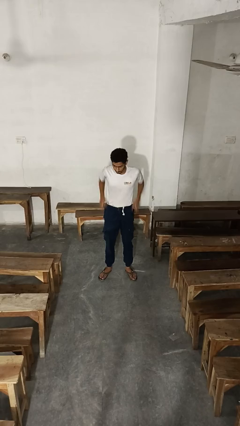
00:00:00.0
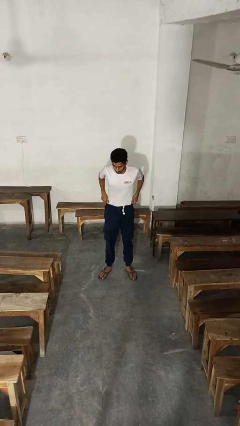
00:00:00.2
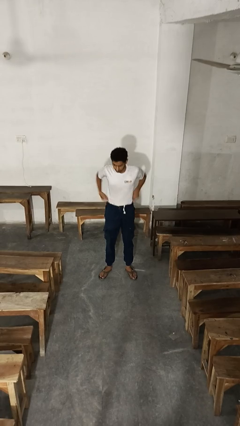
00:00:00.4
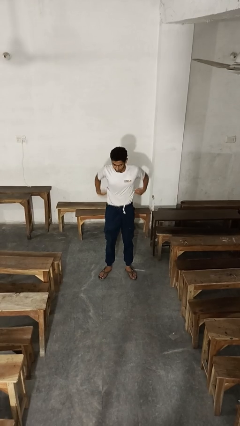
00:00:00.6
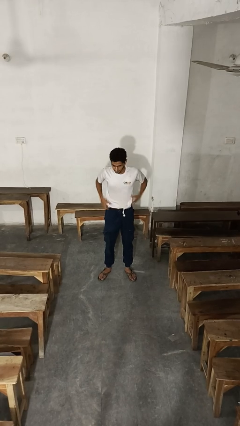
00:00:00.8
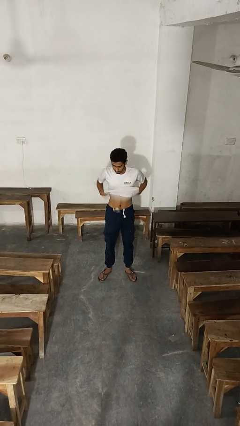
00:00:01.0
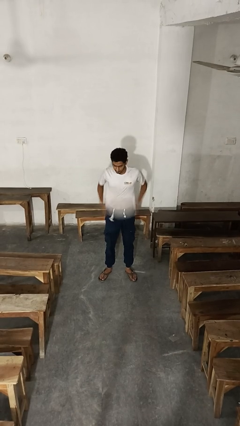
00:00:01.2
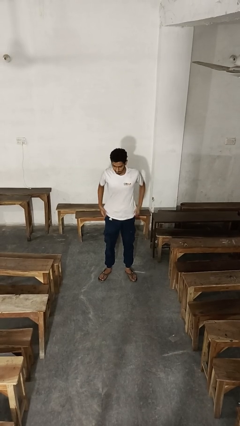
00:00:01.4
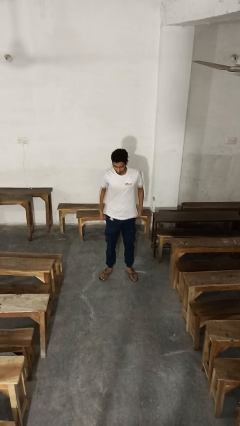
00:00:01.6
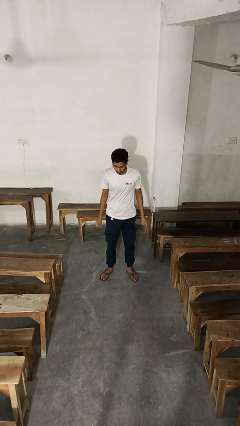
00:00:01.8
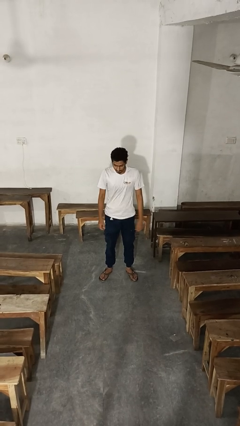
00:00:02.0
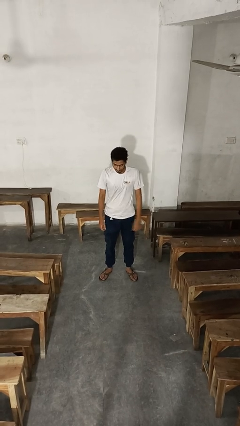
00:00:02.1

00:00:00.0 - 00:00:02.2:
person untucks shirt

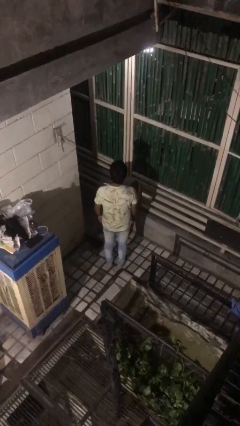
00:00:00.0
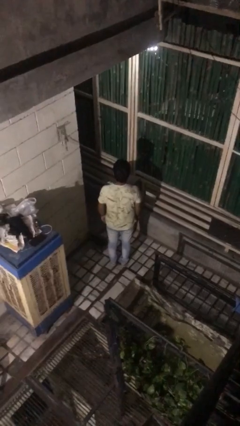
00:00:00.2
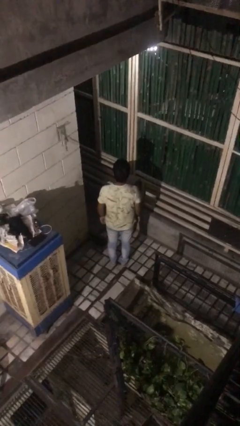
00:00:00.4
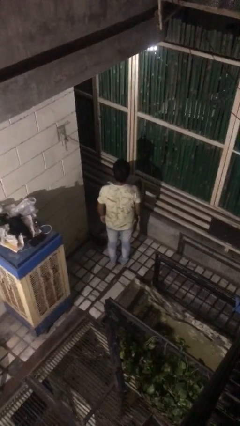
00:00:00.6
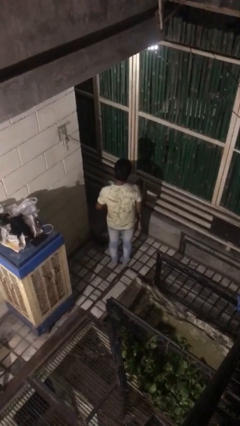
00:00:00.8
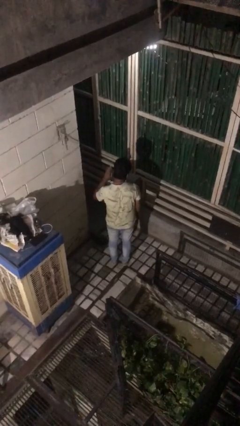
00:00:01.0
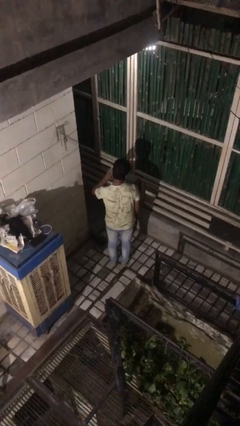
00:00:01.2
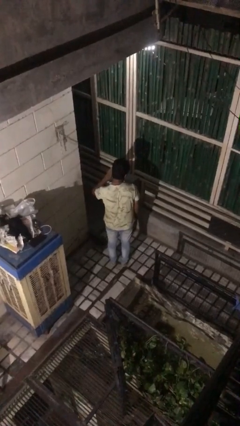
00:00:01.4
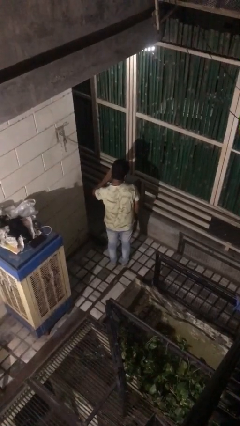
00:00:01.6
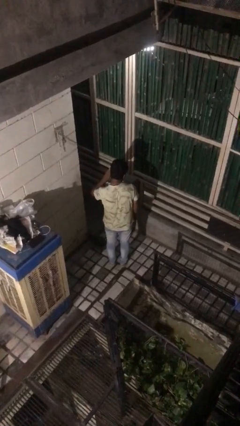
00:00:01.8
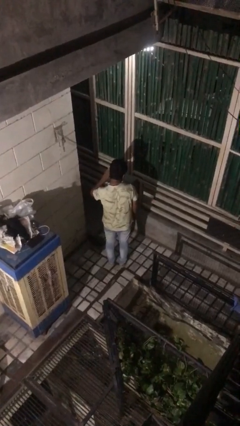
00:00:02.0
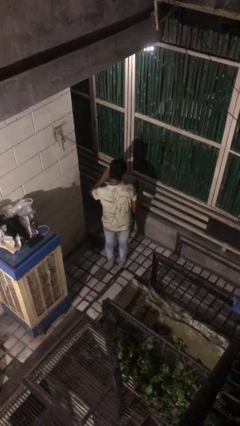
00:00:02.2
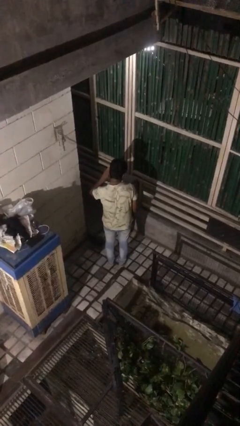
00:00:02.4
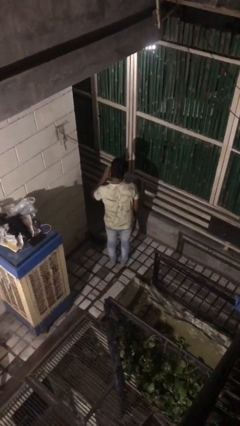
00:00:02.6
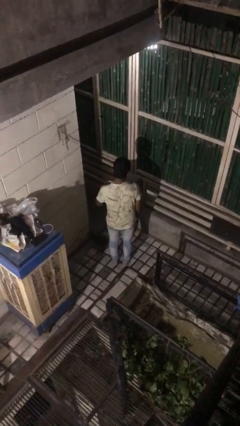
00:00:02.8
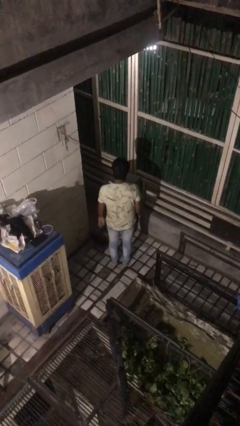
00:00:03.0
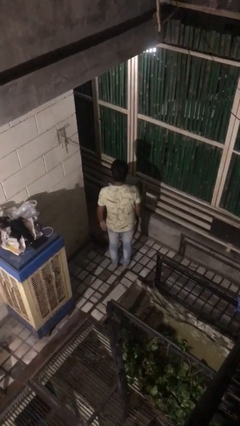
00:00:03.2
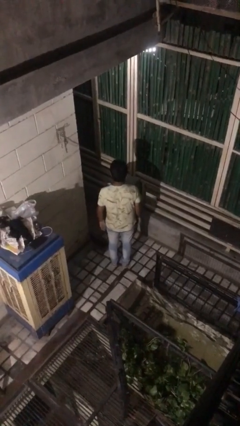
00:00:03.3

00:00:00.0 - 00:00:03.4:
person gestures listen closely

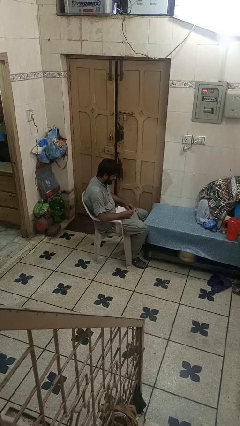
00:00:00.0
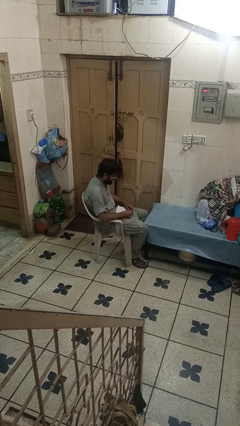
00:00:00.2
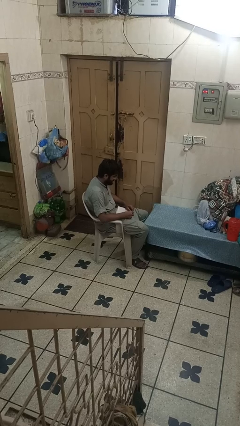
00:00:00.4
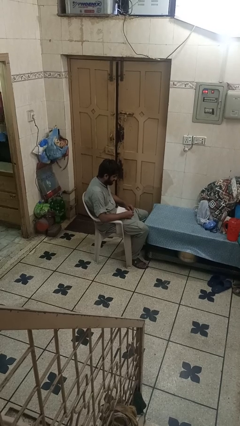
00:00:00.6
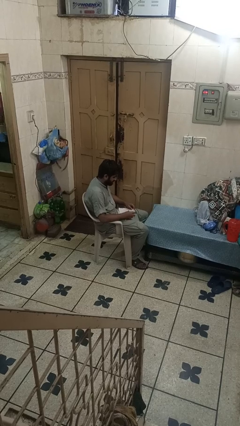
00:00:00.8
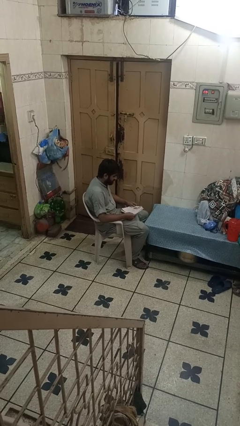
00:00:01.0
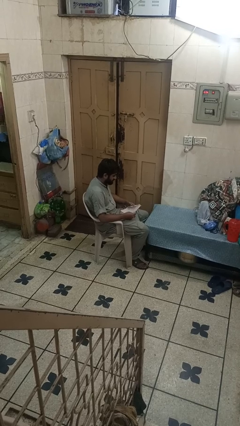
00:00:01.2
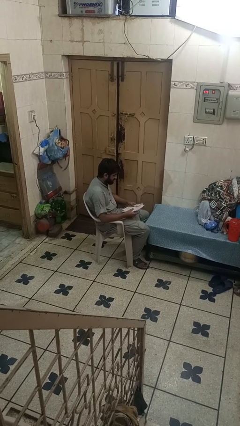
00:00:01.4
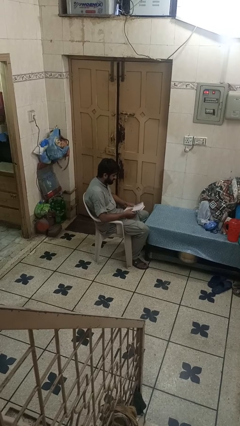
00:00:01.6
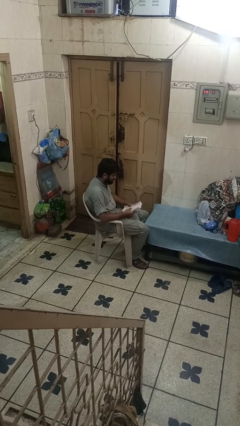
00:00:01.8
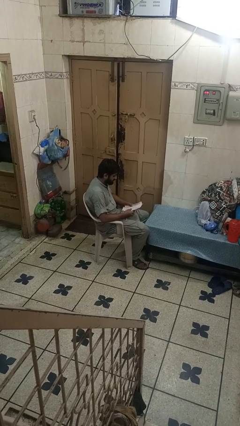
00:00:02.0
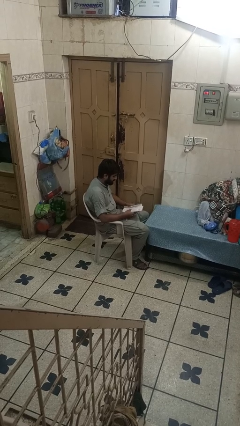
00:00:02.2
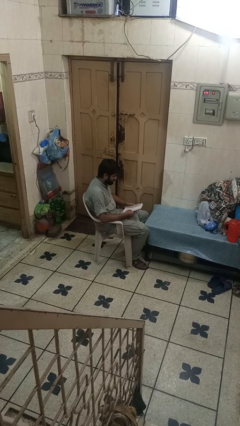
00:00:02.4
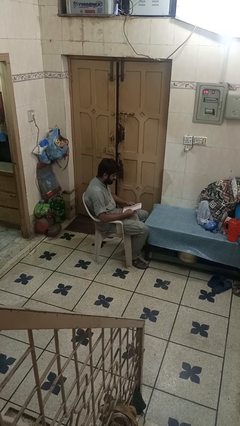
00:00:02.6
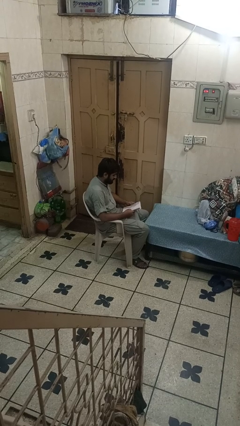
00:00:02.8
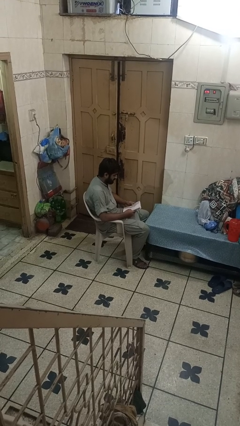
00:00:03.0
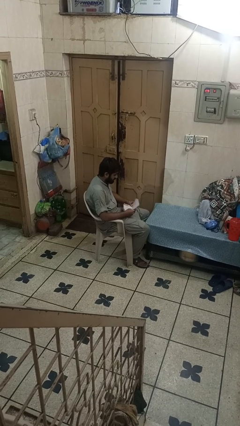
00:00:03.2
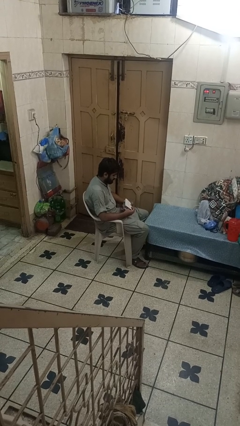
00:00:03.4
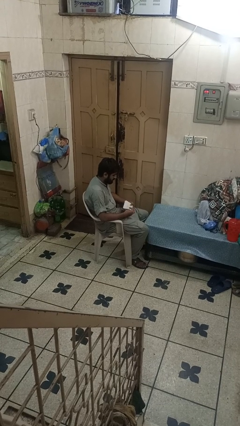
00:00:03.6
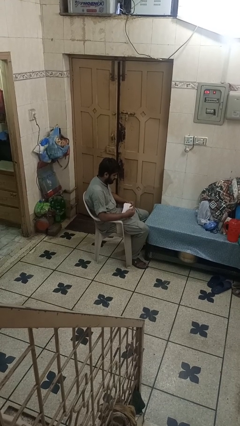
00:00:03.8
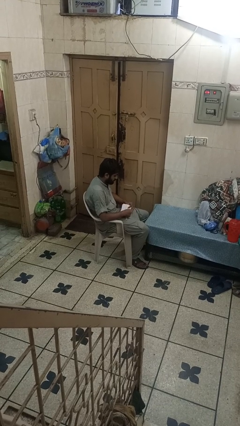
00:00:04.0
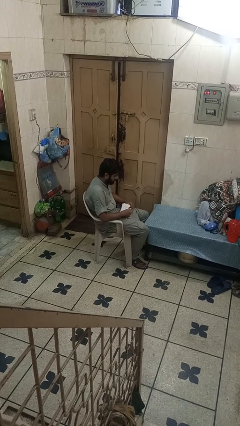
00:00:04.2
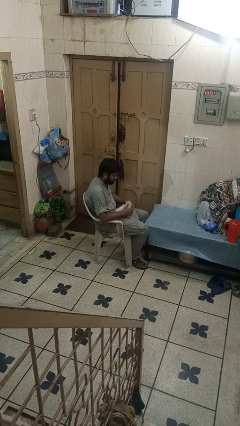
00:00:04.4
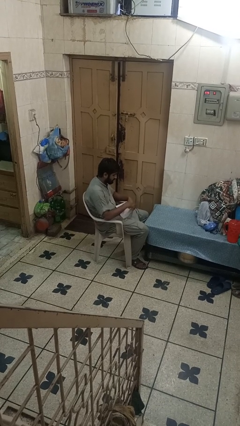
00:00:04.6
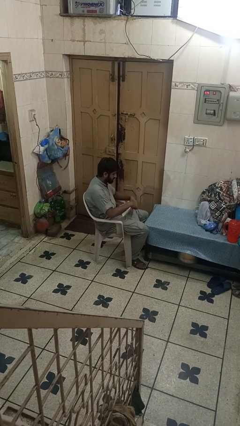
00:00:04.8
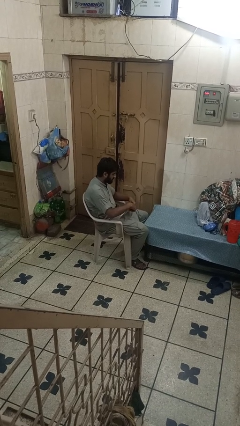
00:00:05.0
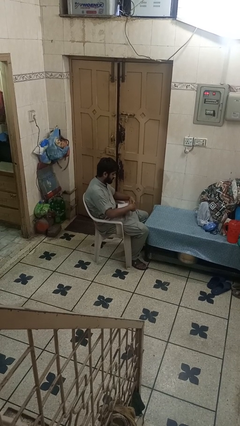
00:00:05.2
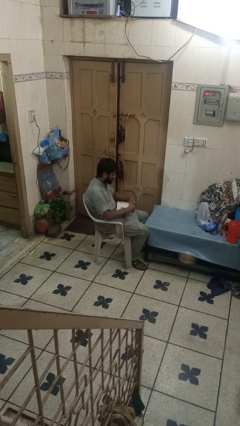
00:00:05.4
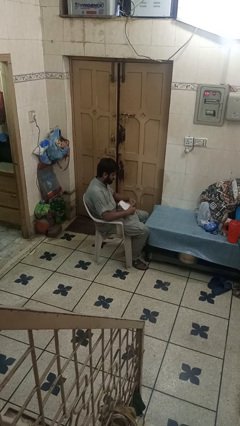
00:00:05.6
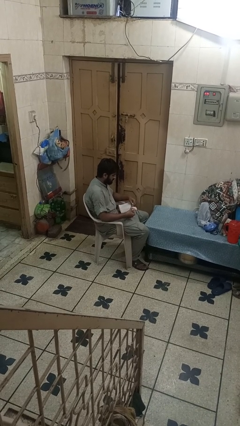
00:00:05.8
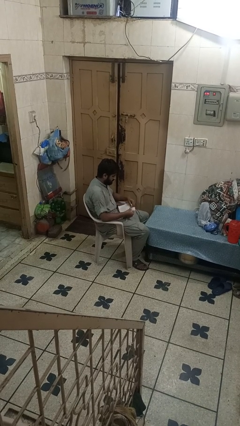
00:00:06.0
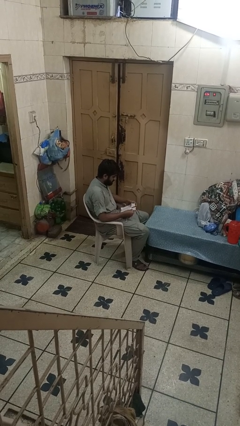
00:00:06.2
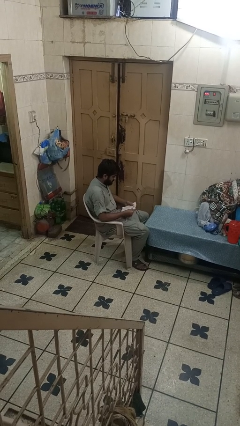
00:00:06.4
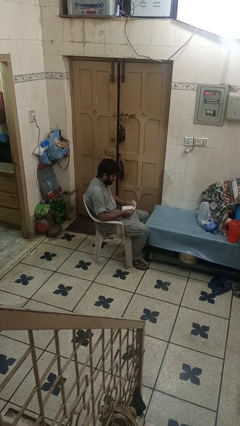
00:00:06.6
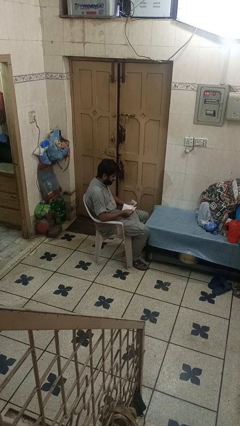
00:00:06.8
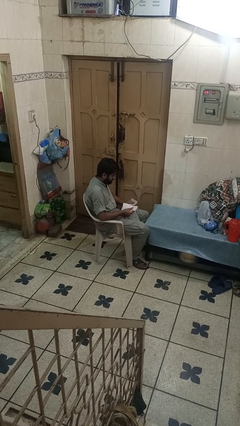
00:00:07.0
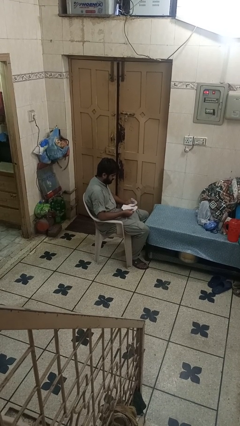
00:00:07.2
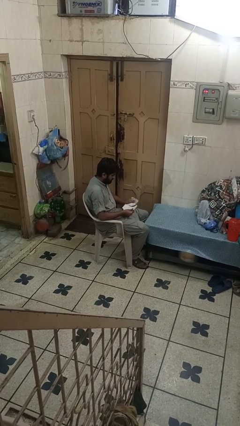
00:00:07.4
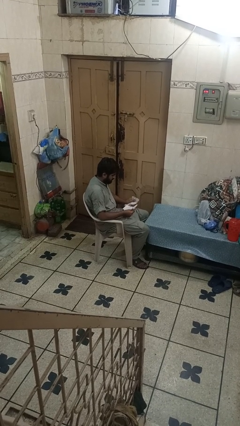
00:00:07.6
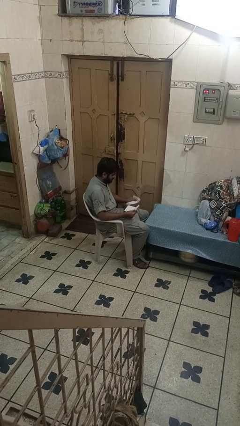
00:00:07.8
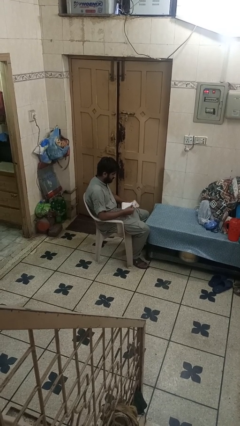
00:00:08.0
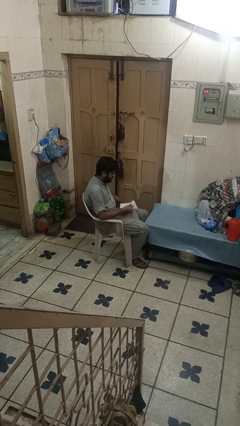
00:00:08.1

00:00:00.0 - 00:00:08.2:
person tears paper

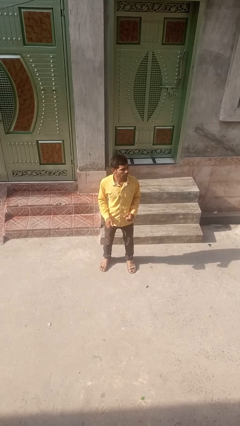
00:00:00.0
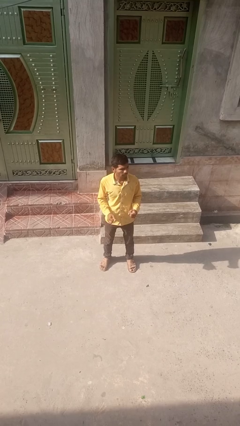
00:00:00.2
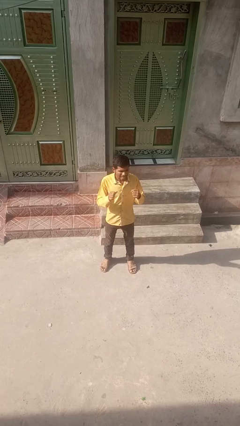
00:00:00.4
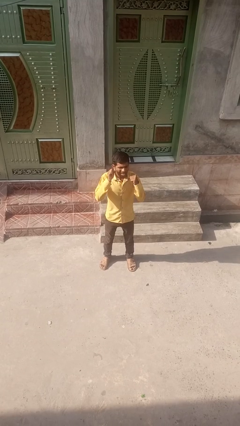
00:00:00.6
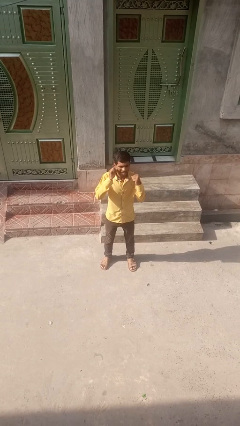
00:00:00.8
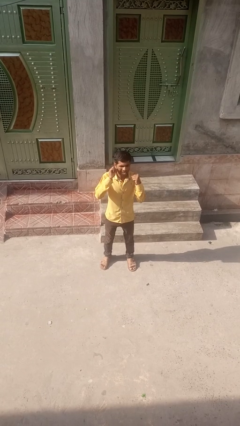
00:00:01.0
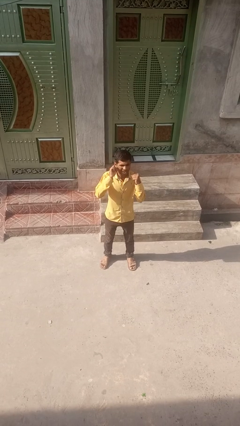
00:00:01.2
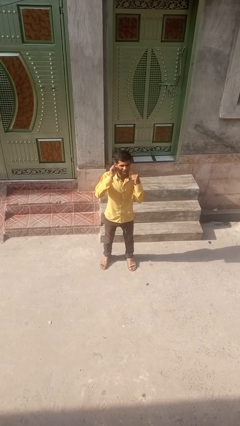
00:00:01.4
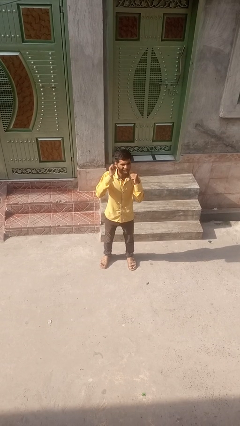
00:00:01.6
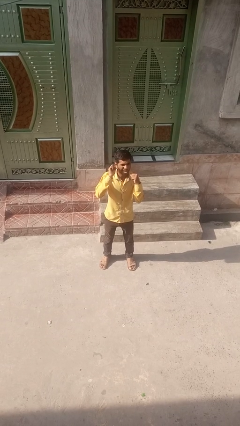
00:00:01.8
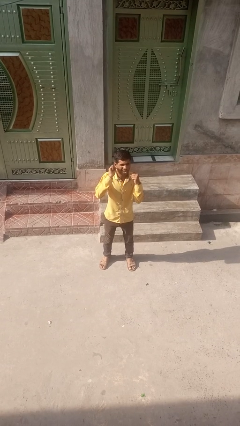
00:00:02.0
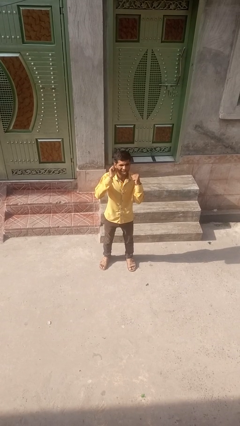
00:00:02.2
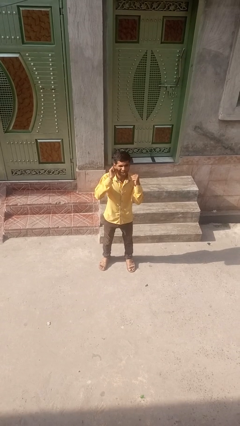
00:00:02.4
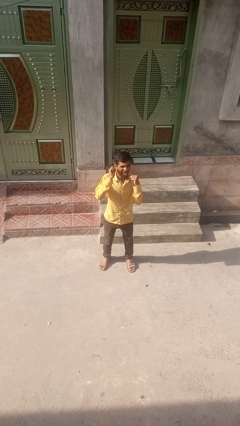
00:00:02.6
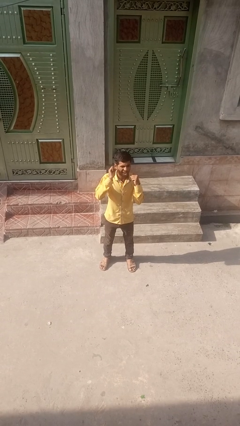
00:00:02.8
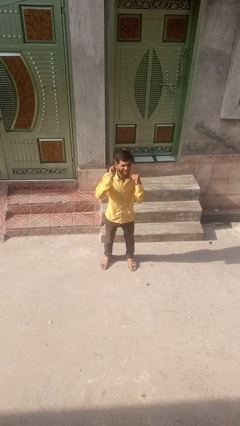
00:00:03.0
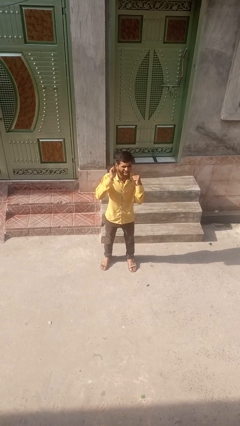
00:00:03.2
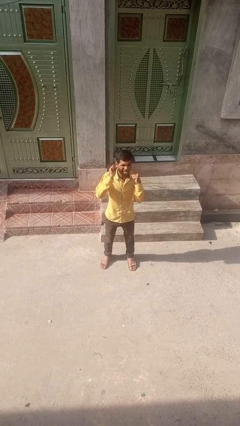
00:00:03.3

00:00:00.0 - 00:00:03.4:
person flosses

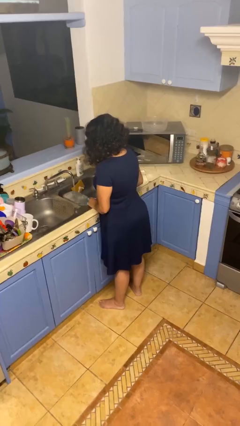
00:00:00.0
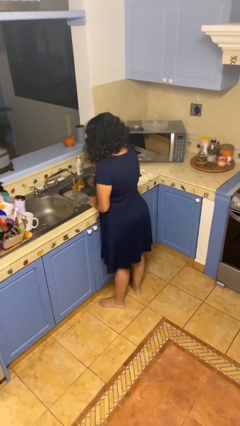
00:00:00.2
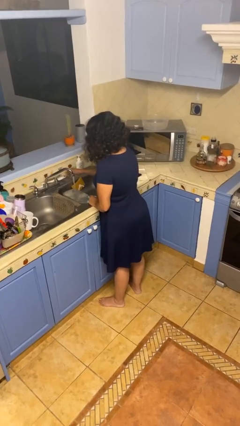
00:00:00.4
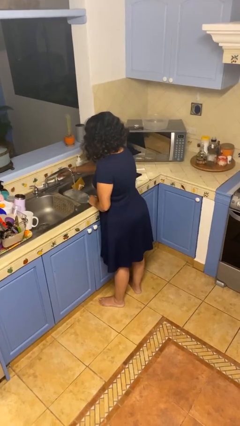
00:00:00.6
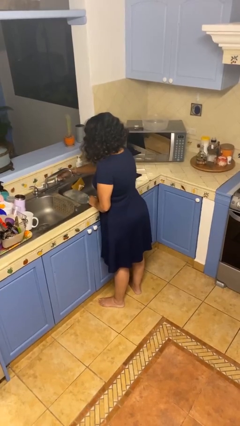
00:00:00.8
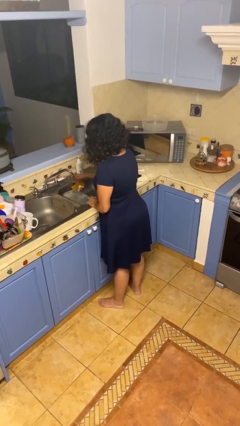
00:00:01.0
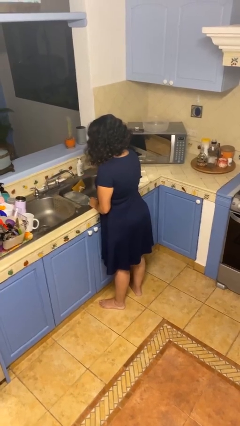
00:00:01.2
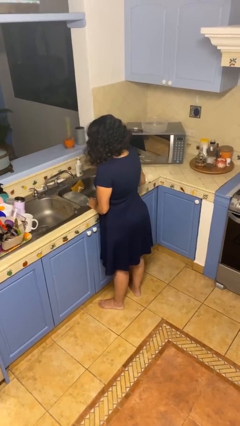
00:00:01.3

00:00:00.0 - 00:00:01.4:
person turns off faucet
